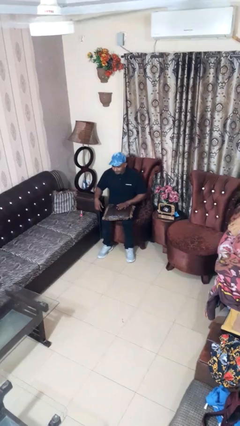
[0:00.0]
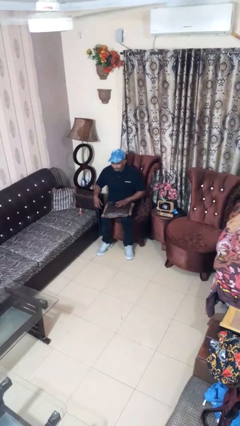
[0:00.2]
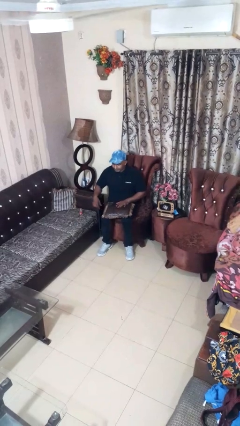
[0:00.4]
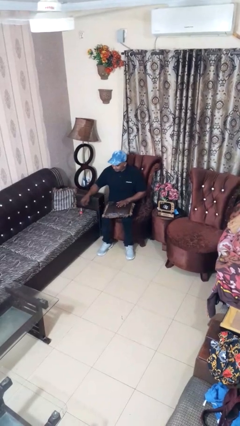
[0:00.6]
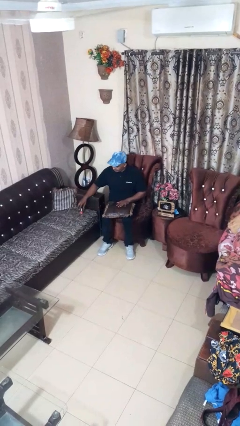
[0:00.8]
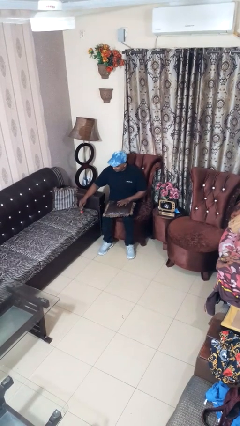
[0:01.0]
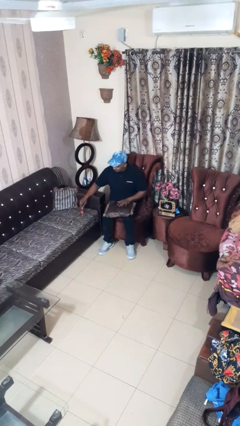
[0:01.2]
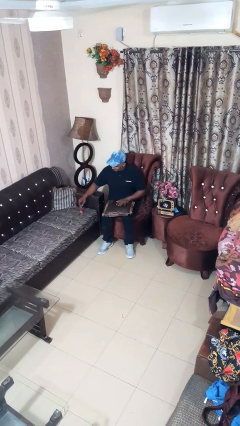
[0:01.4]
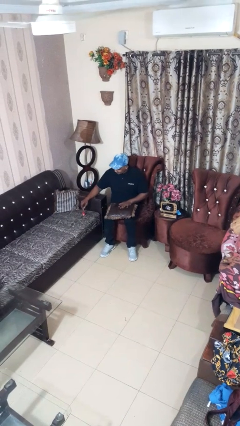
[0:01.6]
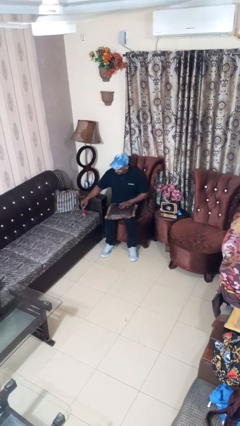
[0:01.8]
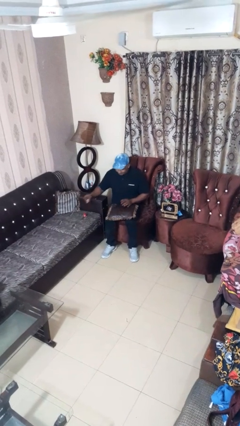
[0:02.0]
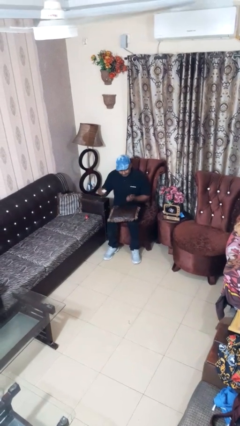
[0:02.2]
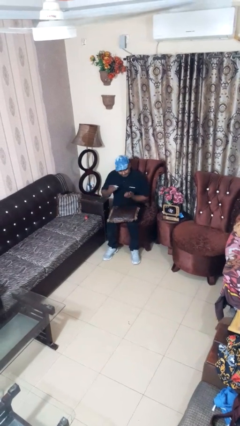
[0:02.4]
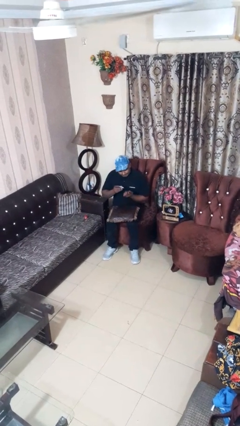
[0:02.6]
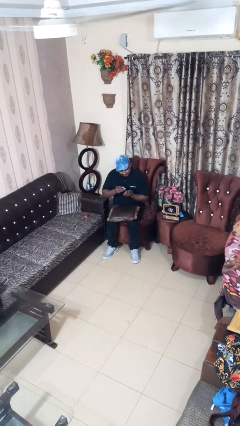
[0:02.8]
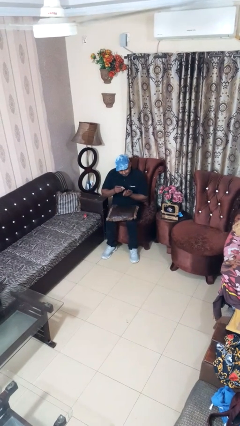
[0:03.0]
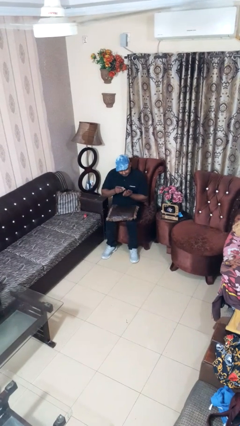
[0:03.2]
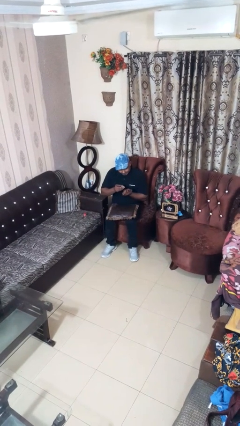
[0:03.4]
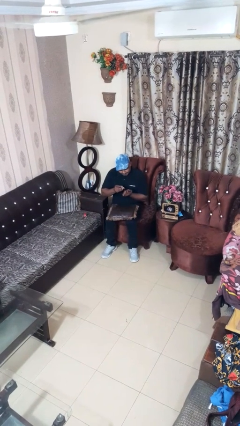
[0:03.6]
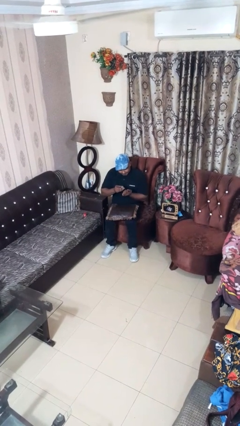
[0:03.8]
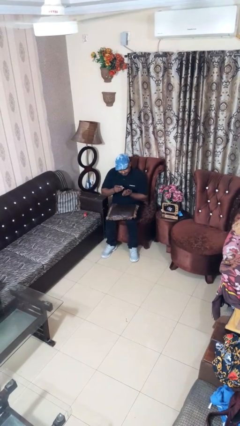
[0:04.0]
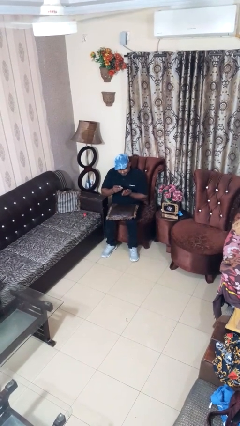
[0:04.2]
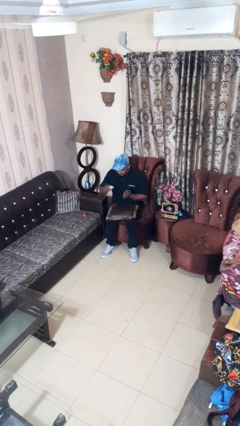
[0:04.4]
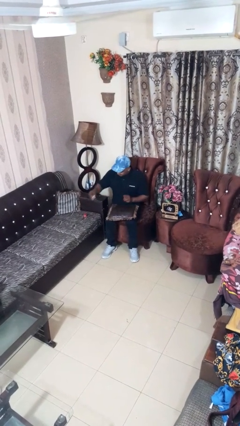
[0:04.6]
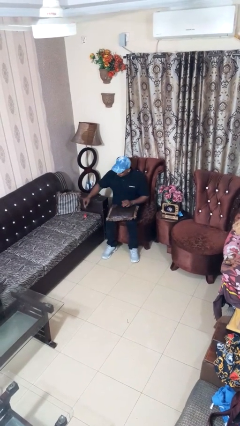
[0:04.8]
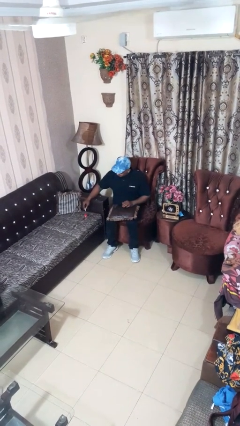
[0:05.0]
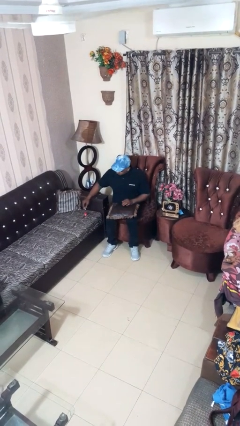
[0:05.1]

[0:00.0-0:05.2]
person paints fingernails

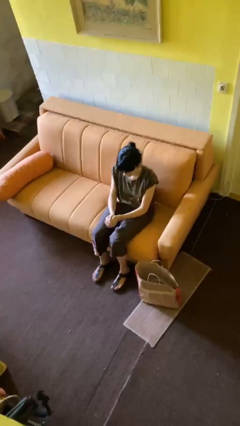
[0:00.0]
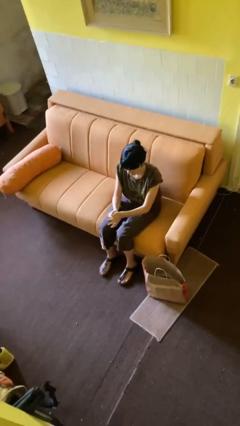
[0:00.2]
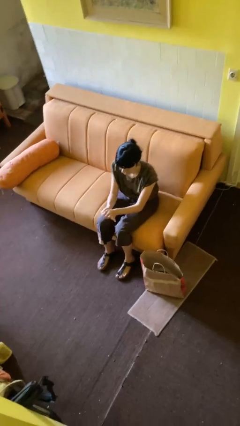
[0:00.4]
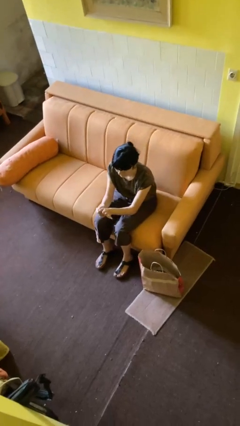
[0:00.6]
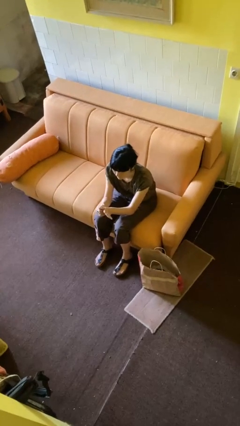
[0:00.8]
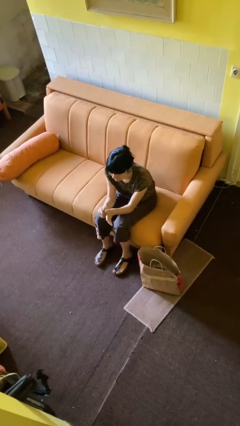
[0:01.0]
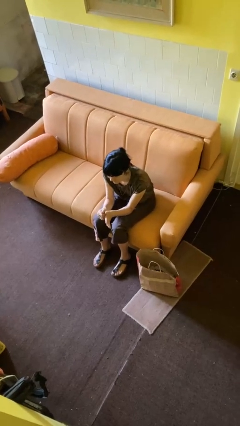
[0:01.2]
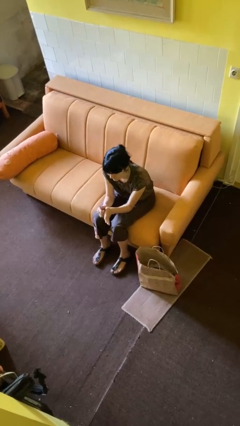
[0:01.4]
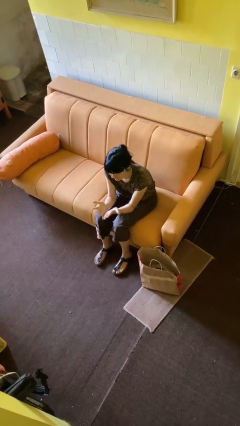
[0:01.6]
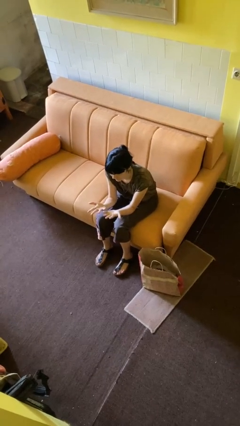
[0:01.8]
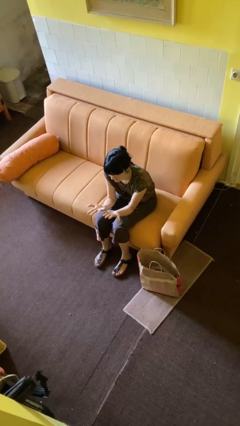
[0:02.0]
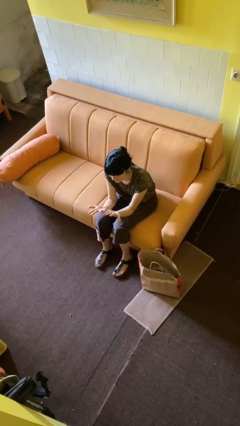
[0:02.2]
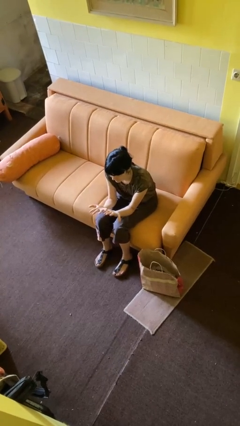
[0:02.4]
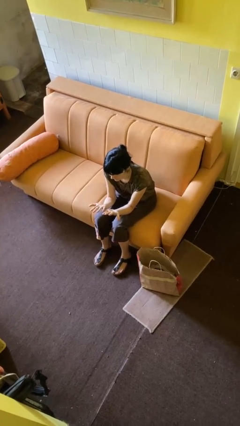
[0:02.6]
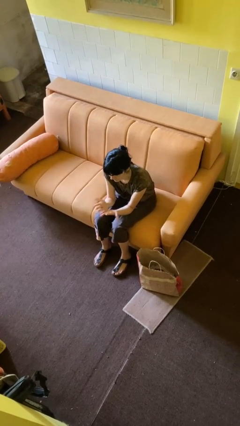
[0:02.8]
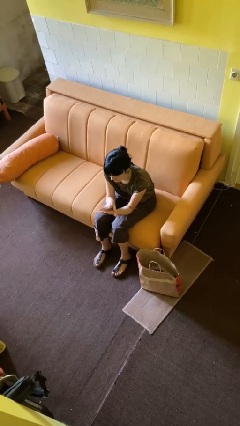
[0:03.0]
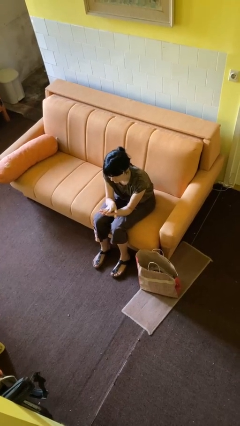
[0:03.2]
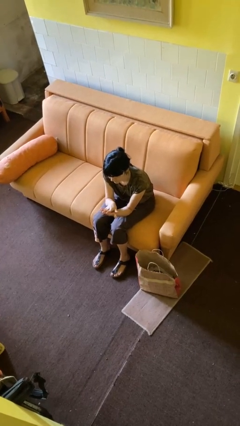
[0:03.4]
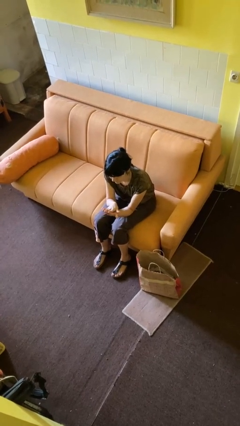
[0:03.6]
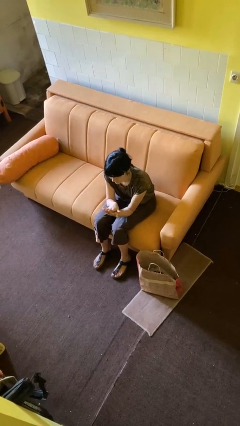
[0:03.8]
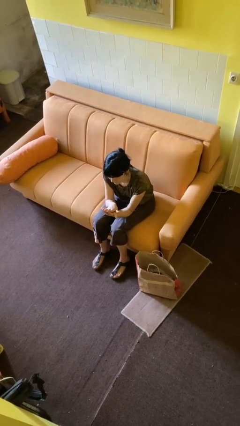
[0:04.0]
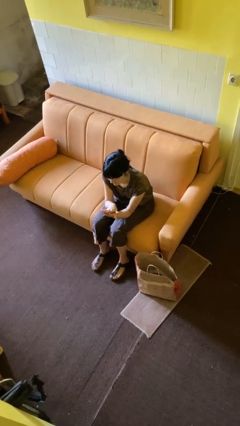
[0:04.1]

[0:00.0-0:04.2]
person looks at hands in lap

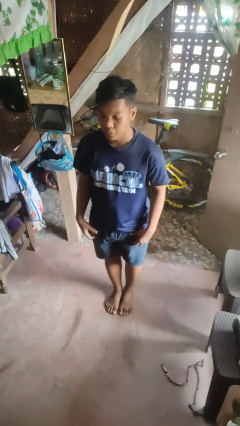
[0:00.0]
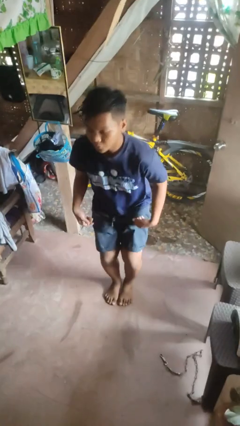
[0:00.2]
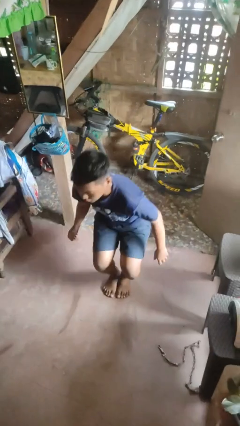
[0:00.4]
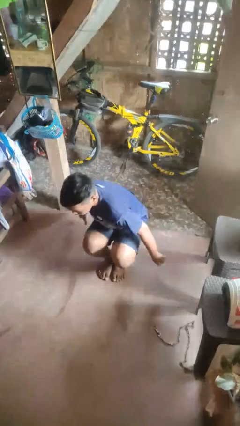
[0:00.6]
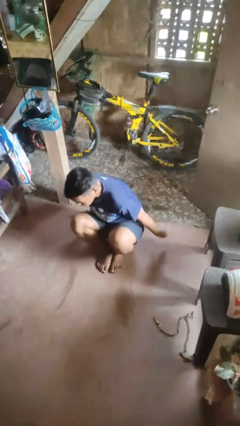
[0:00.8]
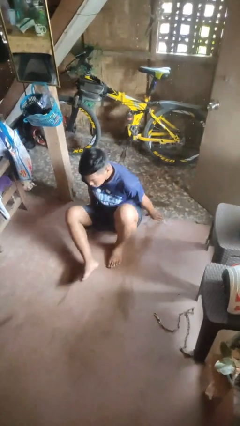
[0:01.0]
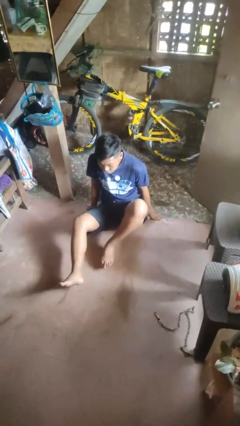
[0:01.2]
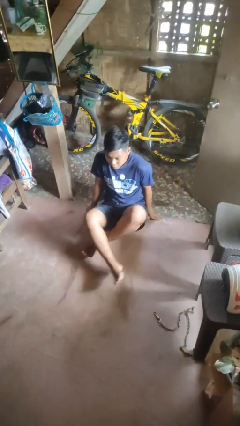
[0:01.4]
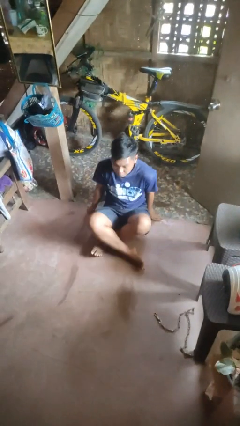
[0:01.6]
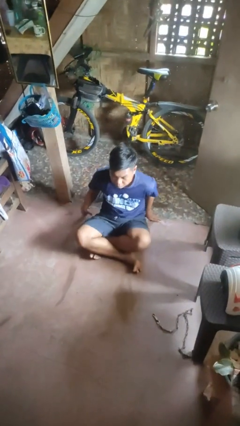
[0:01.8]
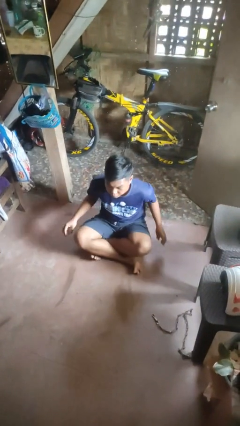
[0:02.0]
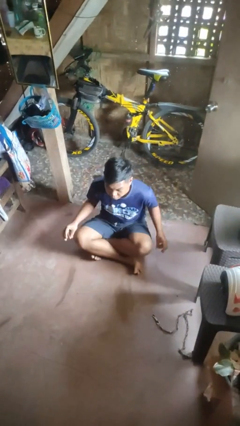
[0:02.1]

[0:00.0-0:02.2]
person sits crisscross

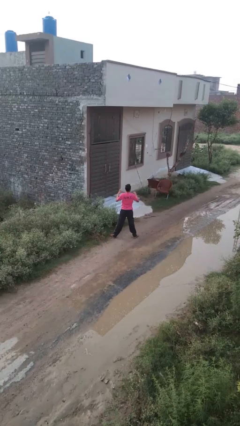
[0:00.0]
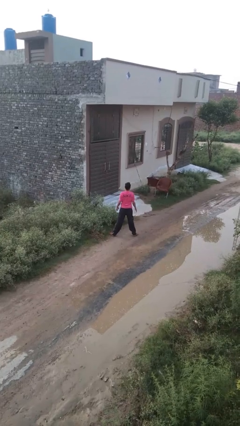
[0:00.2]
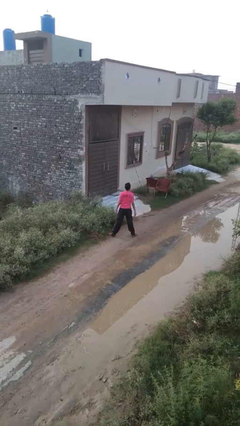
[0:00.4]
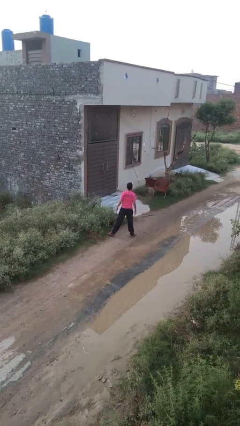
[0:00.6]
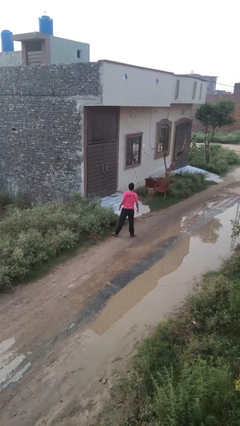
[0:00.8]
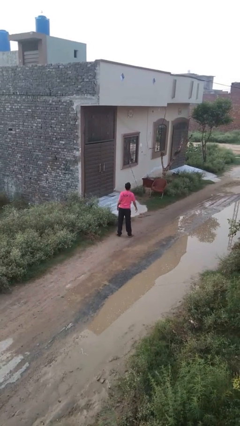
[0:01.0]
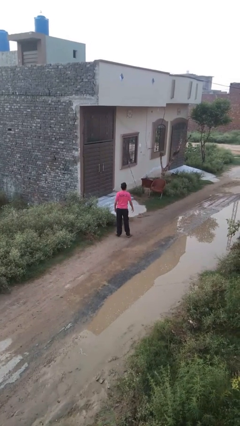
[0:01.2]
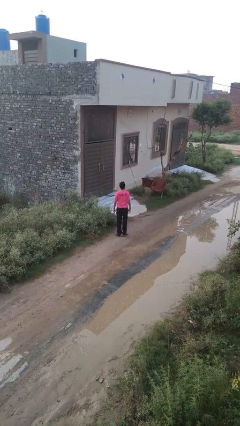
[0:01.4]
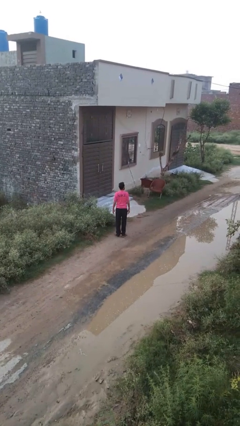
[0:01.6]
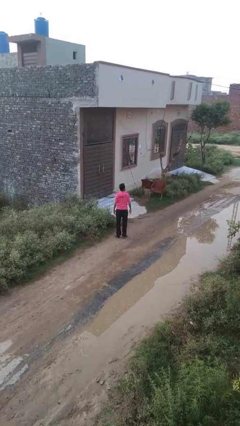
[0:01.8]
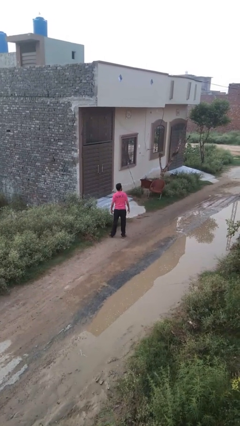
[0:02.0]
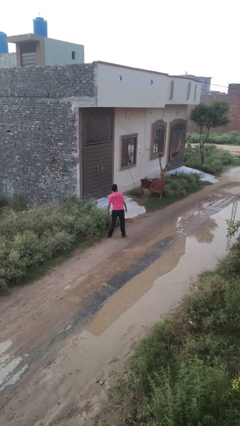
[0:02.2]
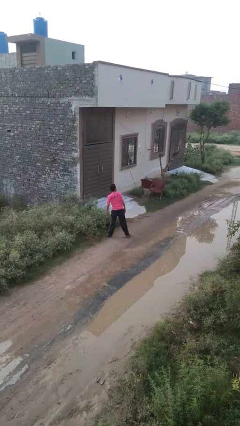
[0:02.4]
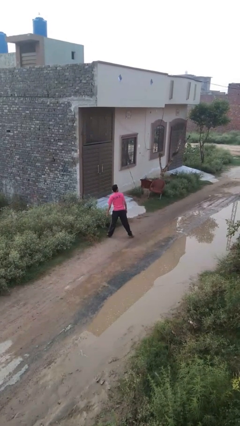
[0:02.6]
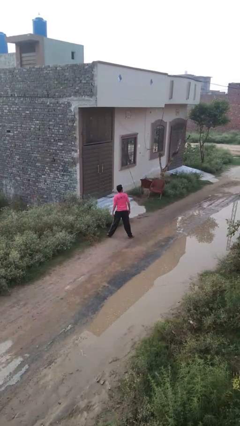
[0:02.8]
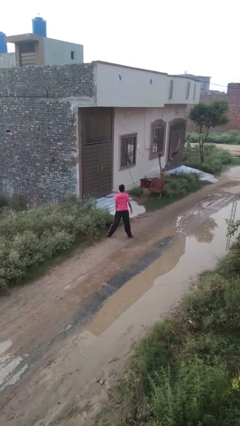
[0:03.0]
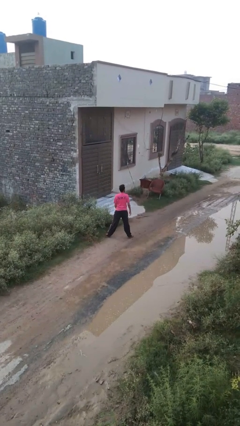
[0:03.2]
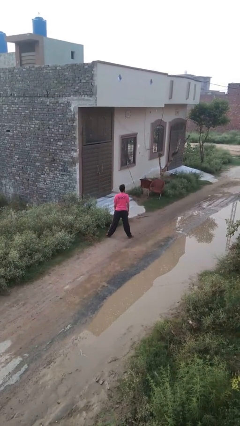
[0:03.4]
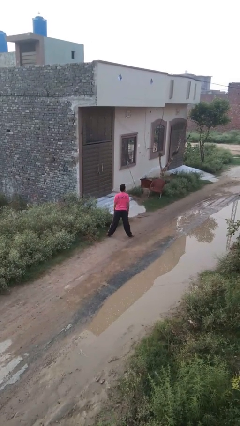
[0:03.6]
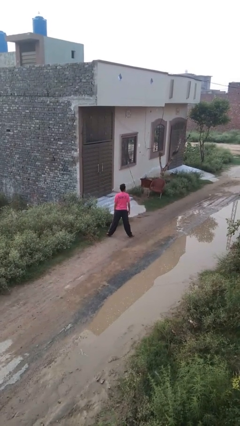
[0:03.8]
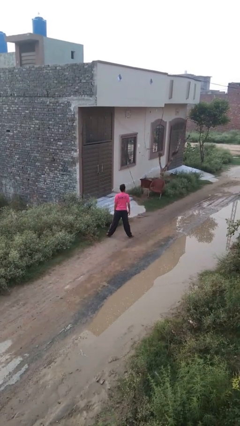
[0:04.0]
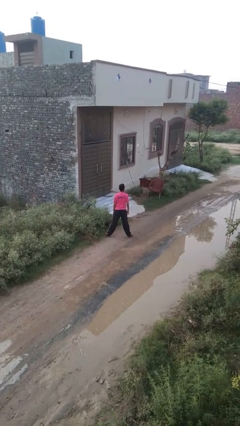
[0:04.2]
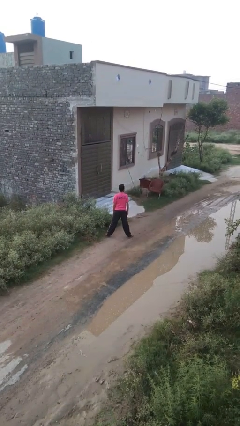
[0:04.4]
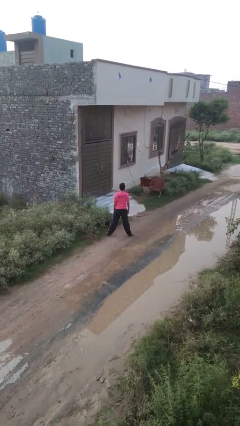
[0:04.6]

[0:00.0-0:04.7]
person stretches back

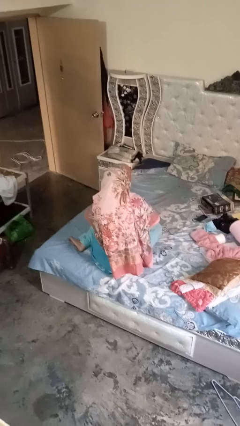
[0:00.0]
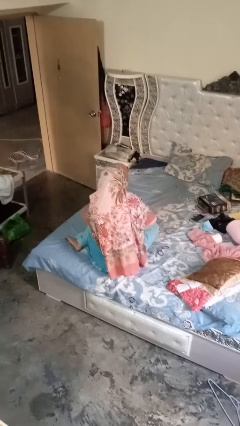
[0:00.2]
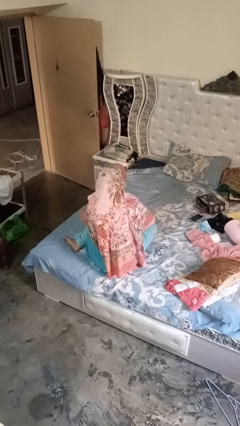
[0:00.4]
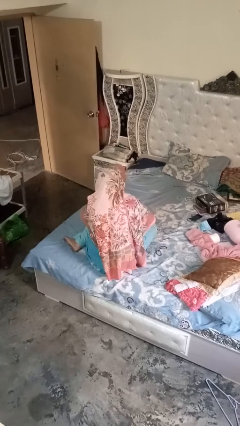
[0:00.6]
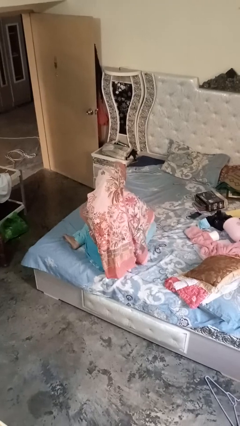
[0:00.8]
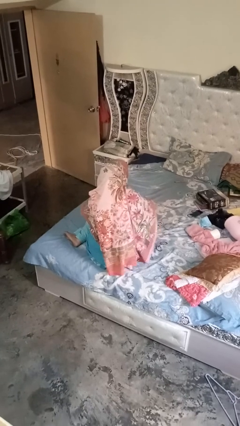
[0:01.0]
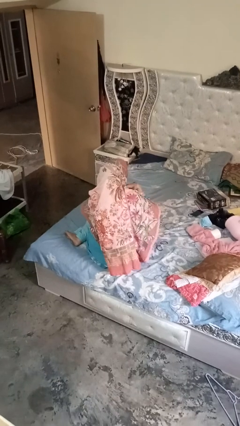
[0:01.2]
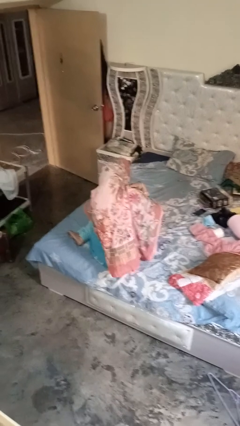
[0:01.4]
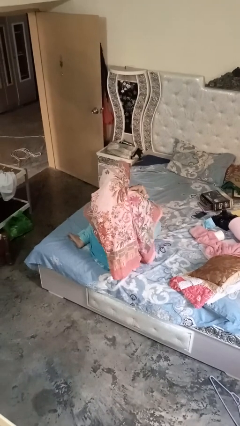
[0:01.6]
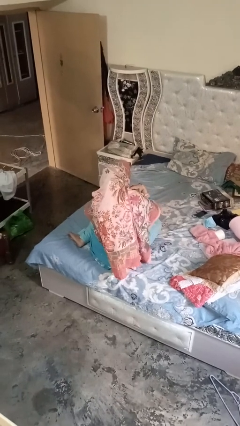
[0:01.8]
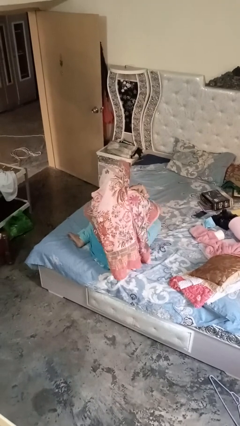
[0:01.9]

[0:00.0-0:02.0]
person gestures cut
